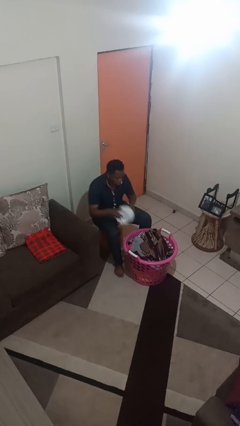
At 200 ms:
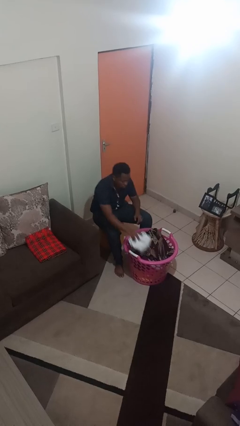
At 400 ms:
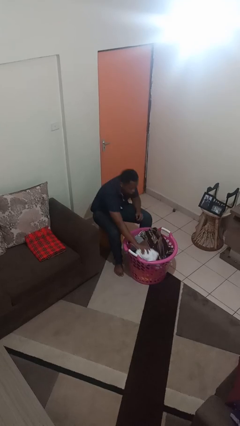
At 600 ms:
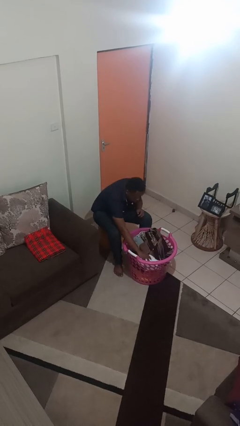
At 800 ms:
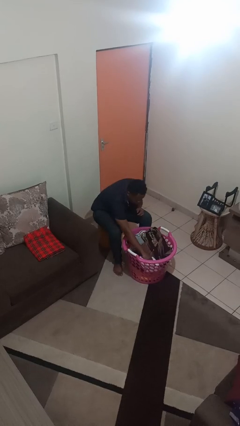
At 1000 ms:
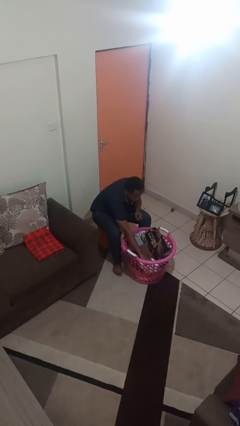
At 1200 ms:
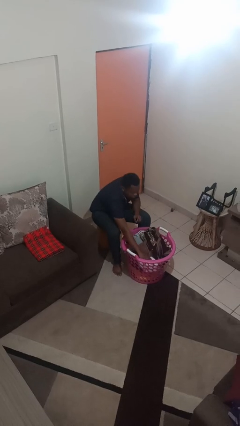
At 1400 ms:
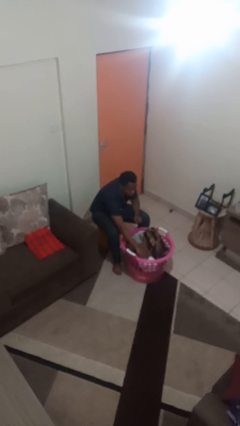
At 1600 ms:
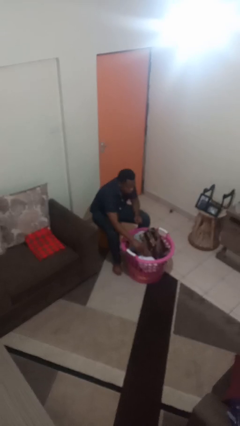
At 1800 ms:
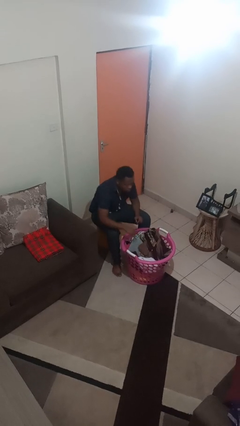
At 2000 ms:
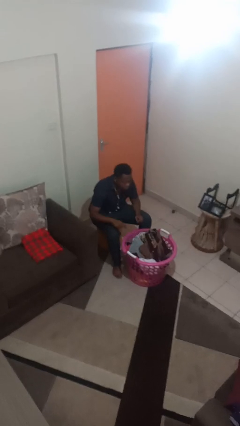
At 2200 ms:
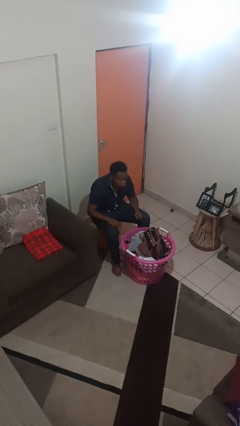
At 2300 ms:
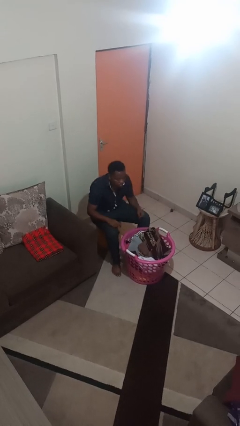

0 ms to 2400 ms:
person puts object into basket

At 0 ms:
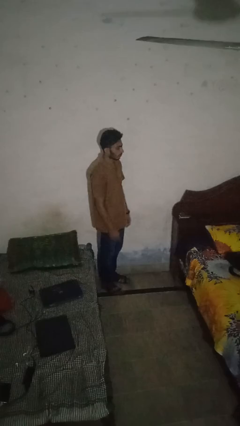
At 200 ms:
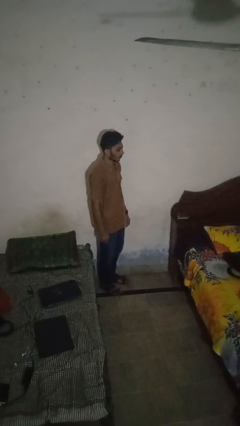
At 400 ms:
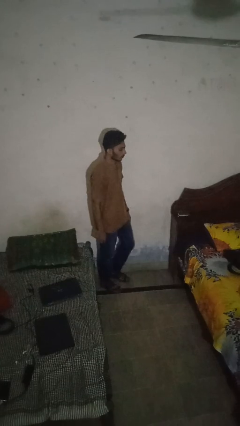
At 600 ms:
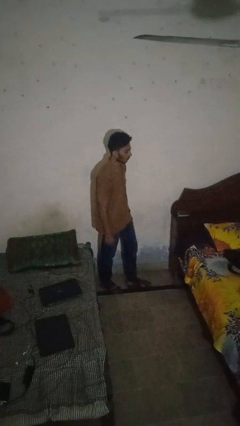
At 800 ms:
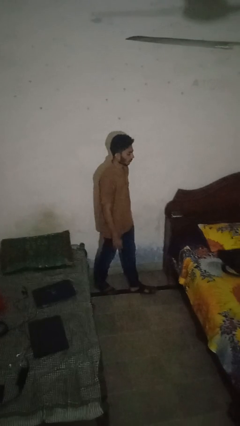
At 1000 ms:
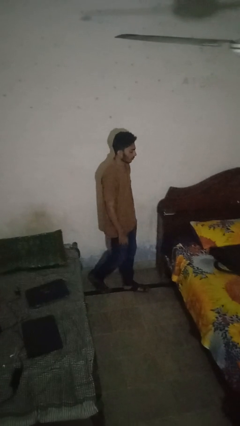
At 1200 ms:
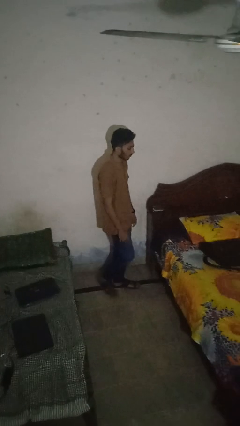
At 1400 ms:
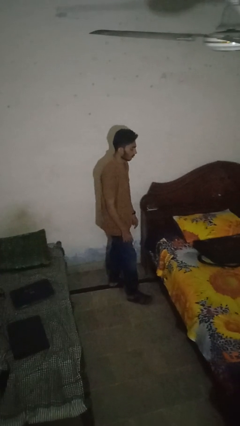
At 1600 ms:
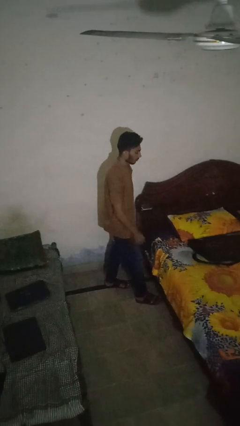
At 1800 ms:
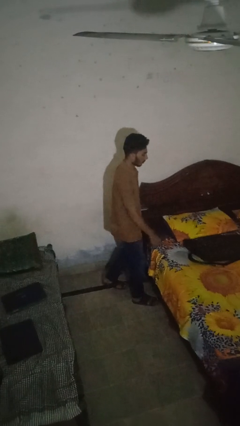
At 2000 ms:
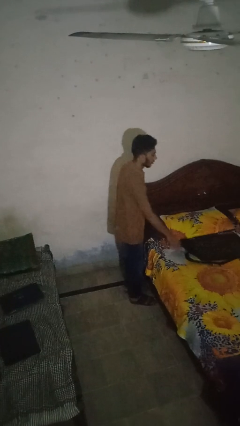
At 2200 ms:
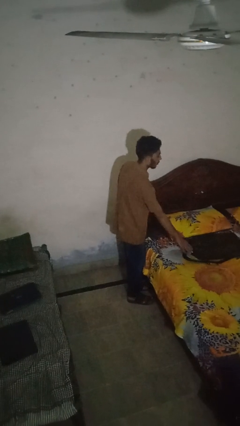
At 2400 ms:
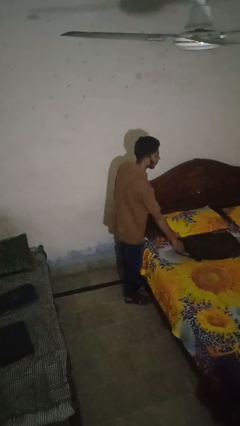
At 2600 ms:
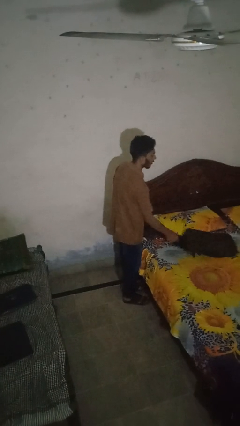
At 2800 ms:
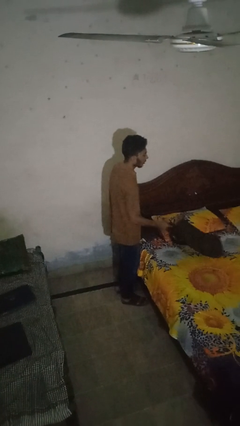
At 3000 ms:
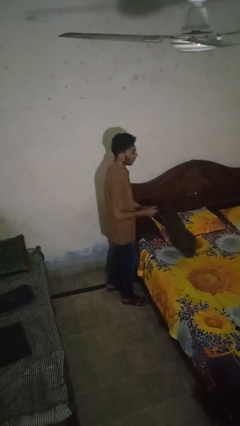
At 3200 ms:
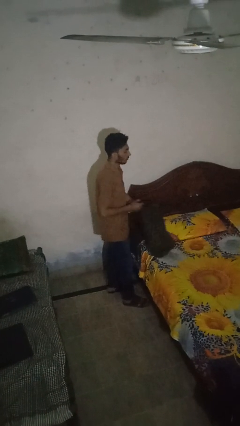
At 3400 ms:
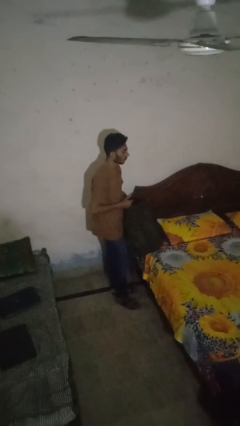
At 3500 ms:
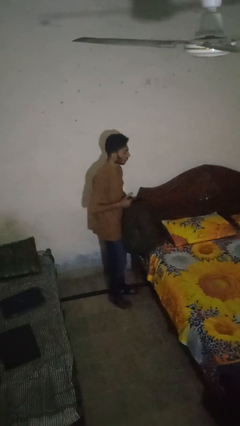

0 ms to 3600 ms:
person picks up object from bed

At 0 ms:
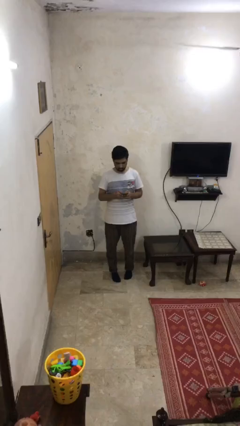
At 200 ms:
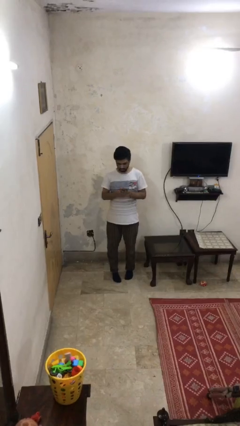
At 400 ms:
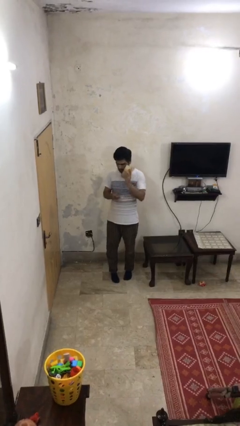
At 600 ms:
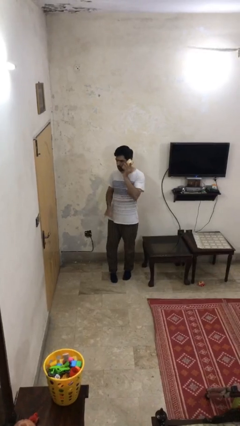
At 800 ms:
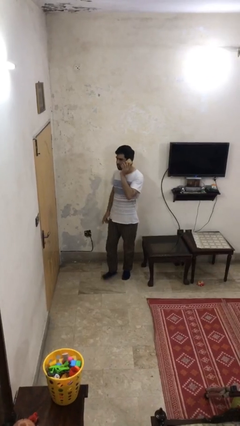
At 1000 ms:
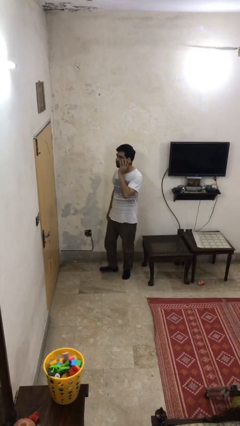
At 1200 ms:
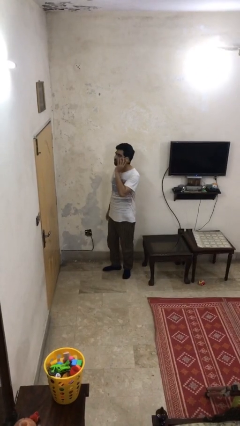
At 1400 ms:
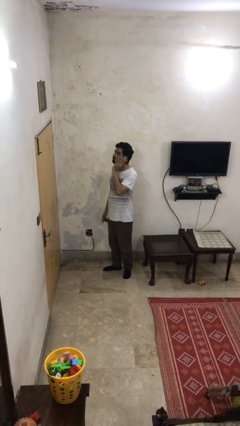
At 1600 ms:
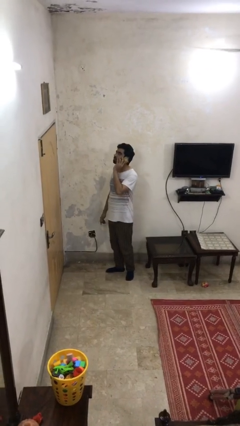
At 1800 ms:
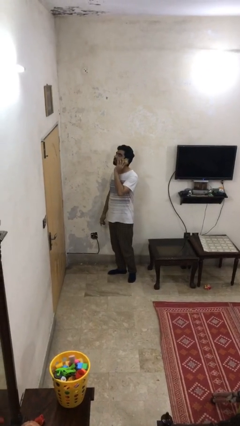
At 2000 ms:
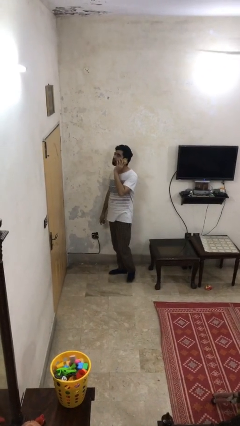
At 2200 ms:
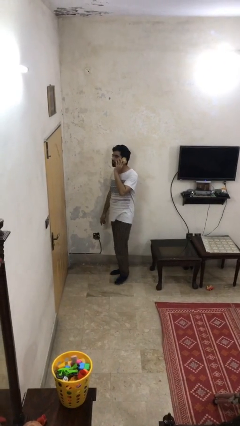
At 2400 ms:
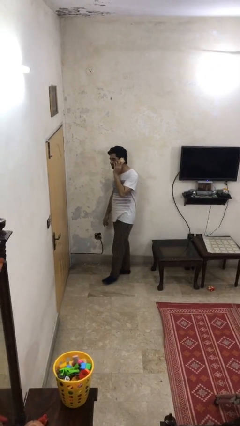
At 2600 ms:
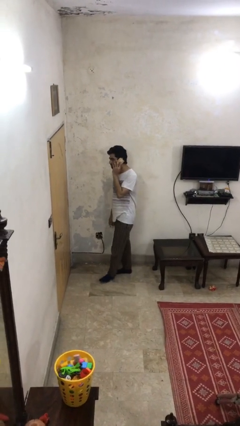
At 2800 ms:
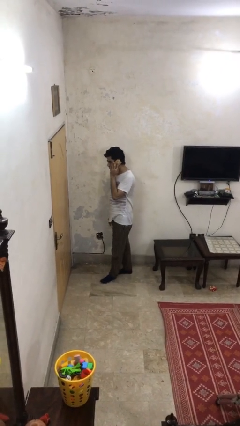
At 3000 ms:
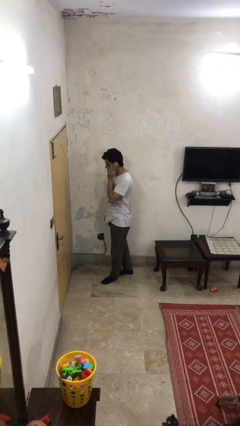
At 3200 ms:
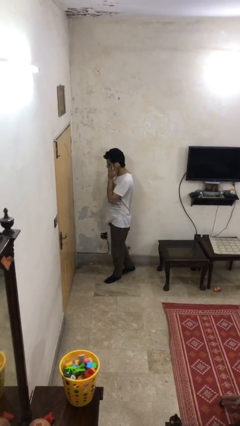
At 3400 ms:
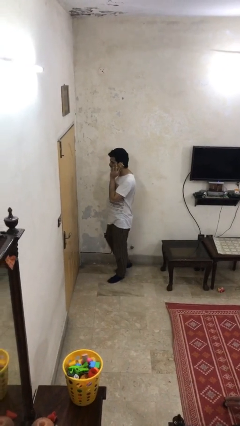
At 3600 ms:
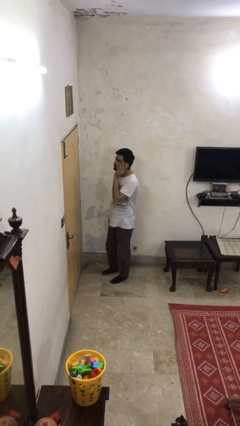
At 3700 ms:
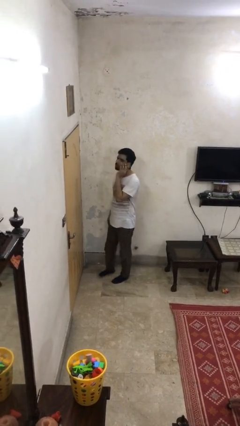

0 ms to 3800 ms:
person talks on phone

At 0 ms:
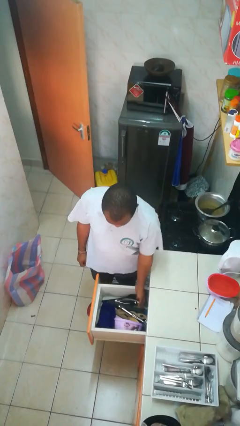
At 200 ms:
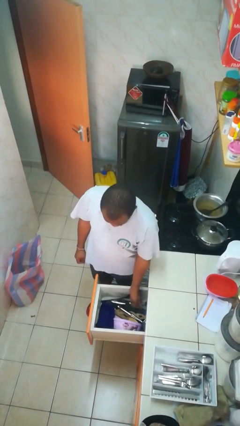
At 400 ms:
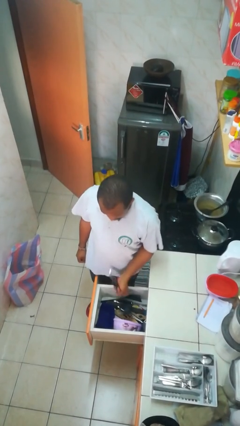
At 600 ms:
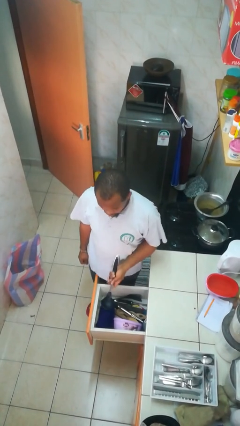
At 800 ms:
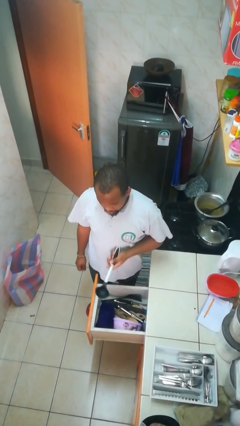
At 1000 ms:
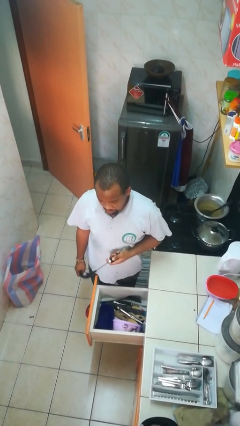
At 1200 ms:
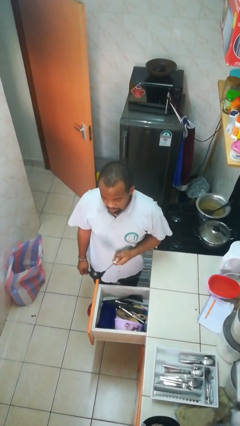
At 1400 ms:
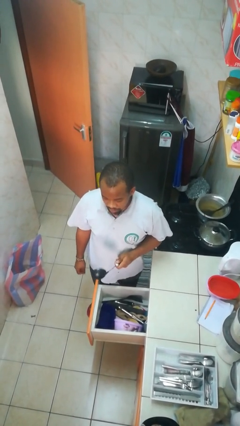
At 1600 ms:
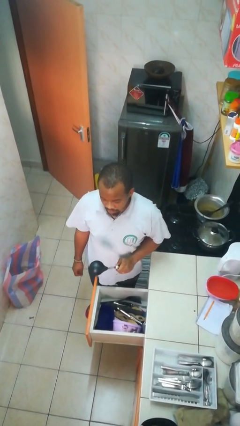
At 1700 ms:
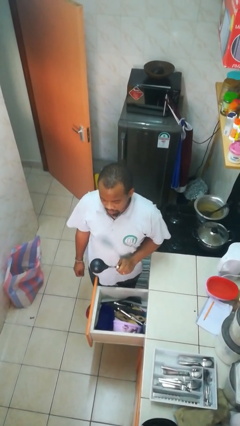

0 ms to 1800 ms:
person takes object from kitchen drawer

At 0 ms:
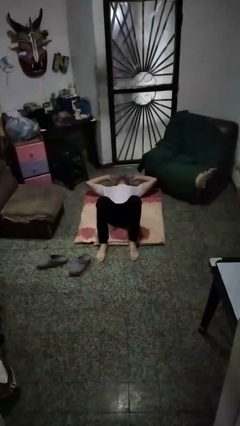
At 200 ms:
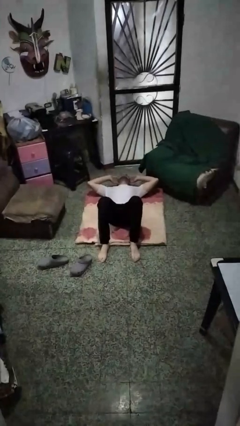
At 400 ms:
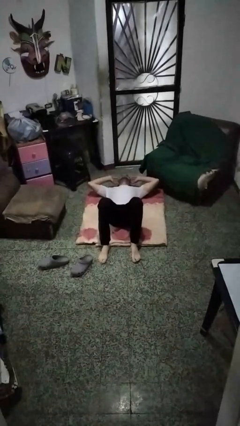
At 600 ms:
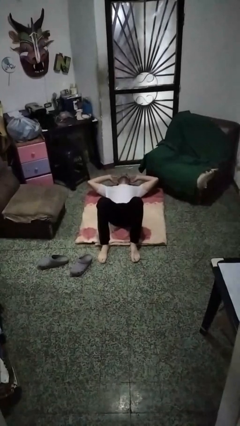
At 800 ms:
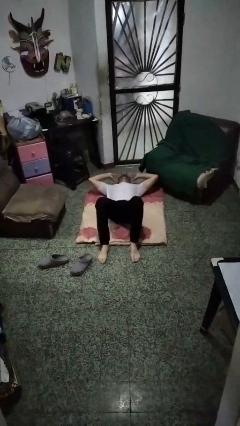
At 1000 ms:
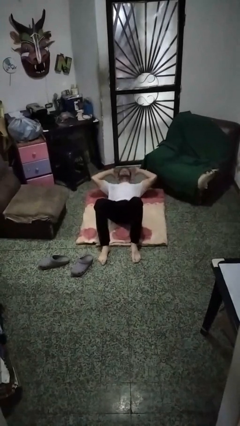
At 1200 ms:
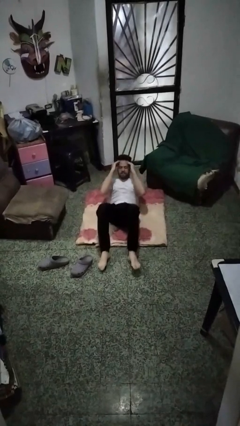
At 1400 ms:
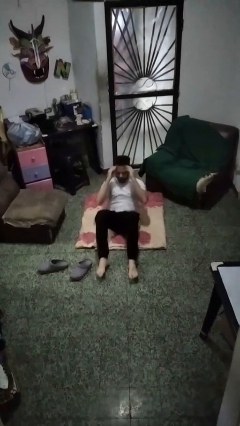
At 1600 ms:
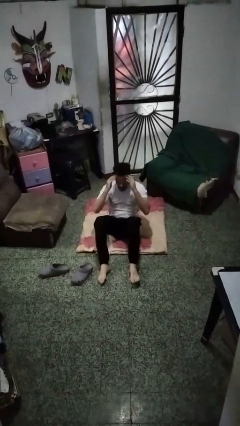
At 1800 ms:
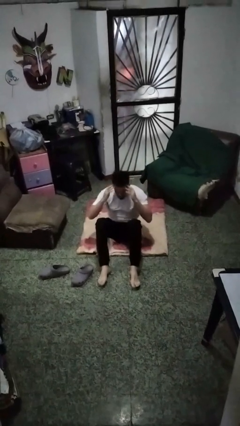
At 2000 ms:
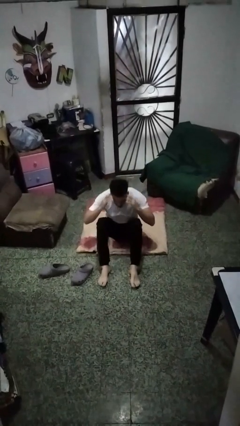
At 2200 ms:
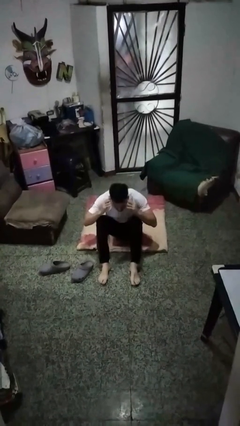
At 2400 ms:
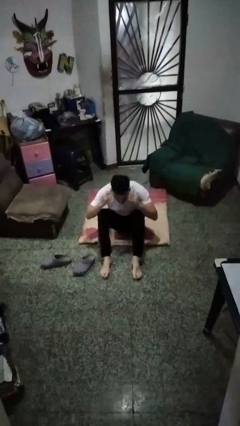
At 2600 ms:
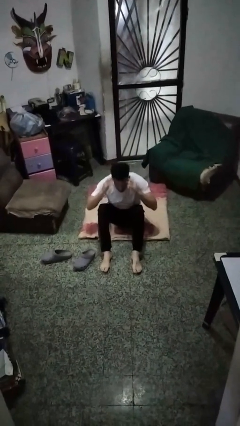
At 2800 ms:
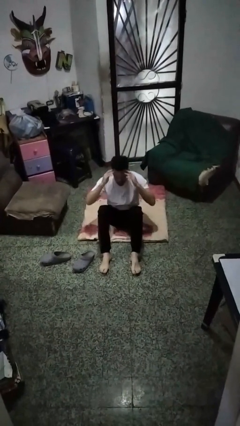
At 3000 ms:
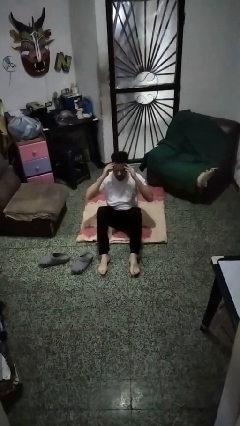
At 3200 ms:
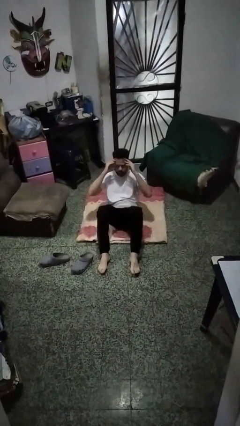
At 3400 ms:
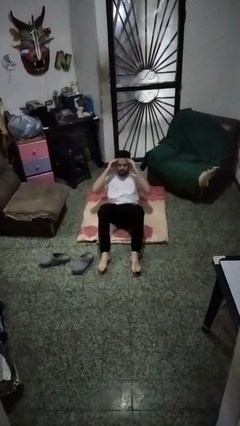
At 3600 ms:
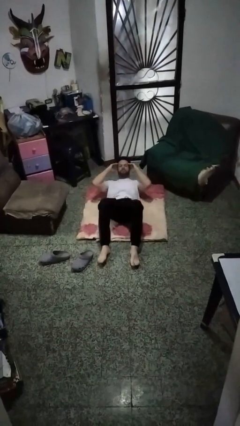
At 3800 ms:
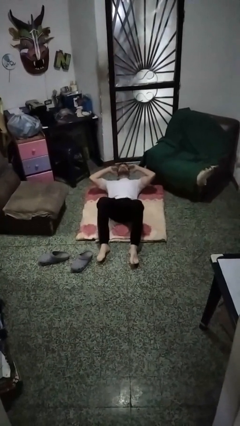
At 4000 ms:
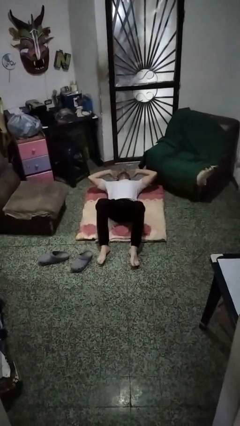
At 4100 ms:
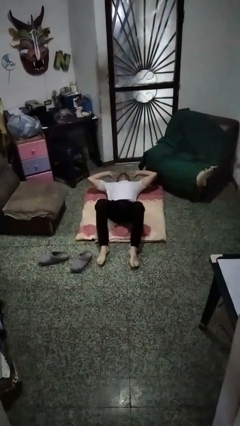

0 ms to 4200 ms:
person exercises with situp

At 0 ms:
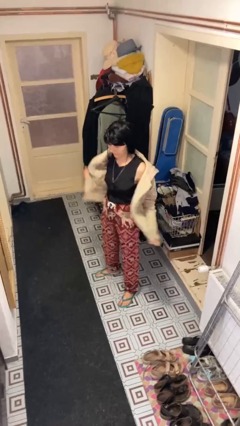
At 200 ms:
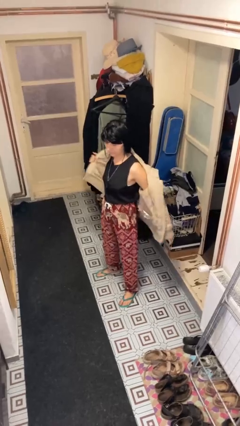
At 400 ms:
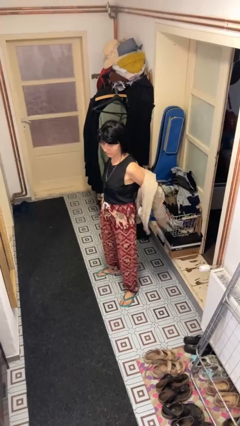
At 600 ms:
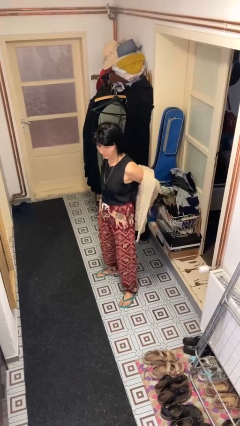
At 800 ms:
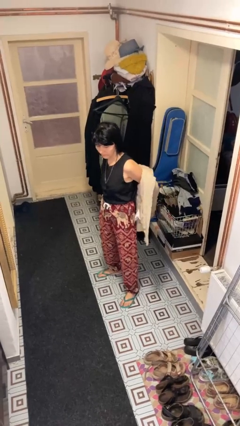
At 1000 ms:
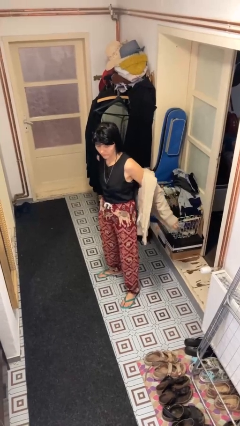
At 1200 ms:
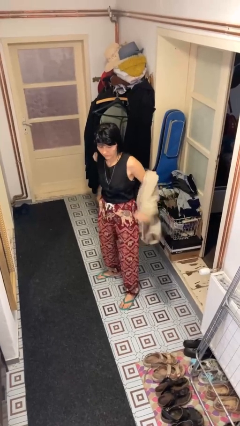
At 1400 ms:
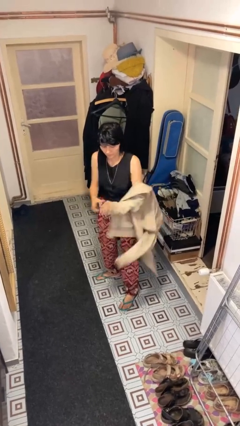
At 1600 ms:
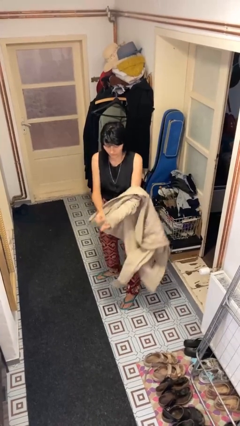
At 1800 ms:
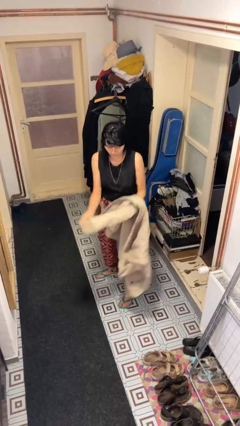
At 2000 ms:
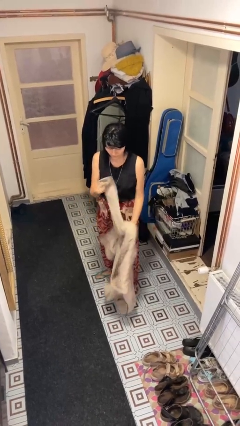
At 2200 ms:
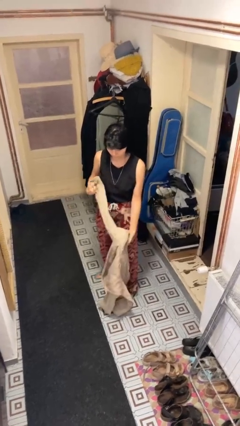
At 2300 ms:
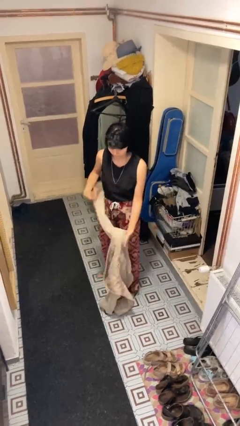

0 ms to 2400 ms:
person takes off jacket
